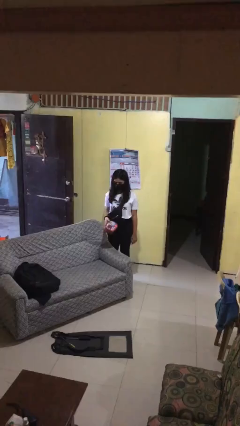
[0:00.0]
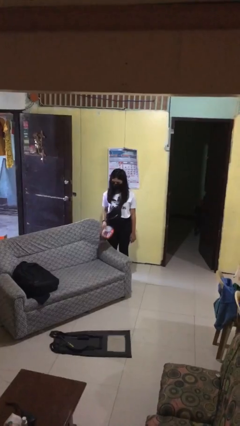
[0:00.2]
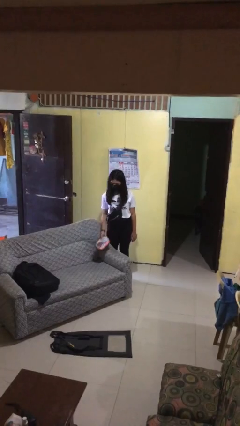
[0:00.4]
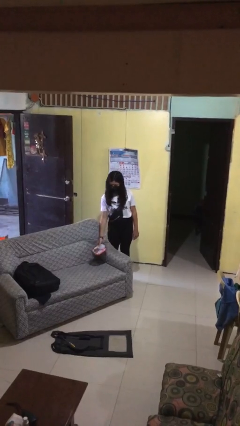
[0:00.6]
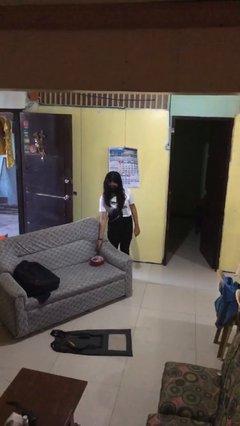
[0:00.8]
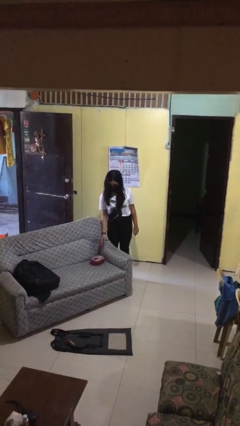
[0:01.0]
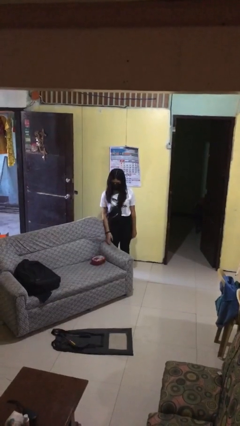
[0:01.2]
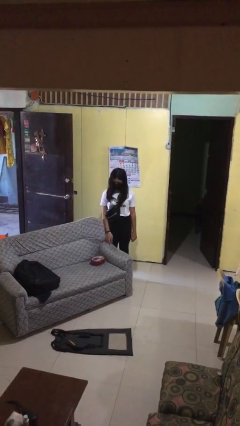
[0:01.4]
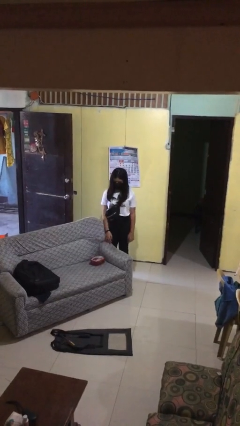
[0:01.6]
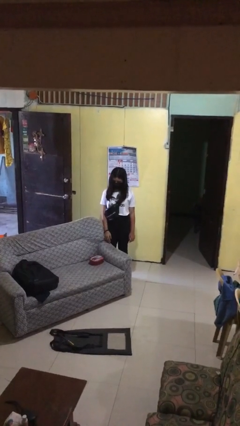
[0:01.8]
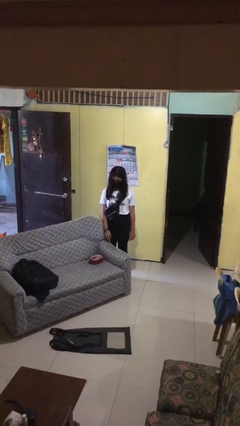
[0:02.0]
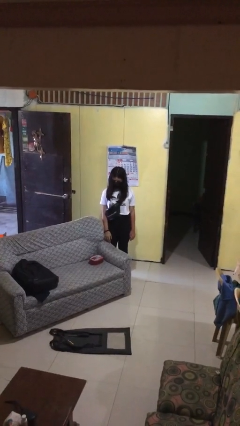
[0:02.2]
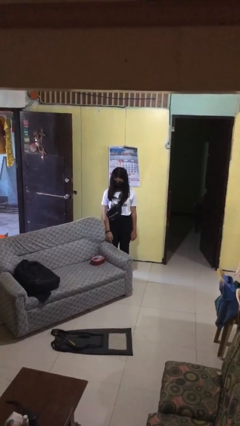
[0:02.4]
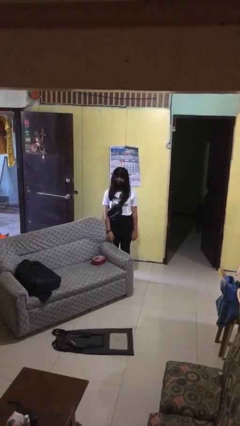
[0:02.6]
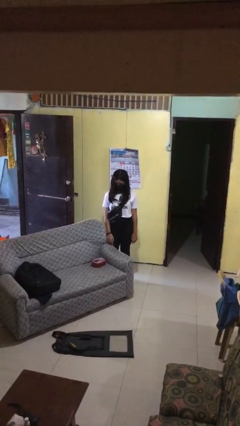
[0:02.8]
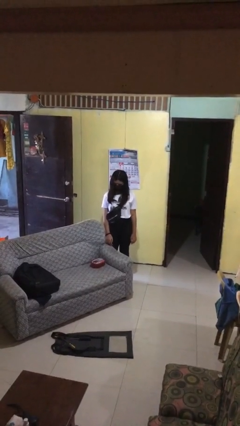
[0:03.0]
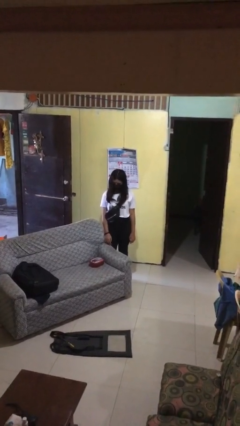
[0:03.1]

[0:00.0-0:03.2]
person puts down object on couch

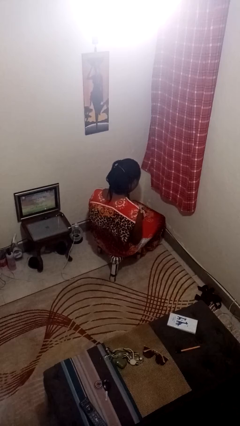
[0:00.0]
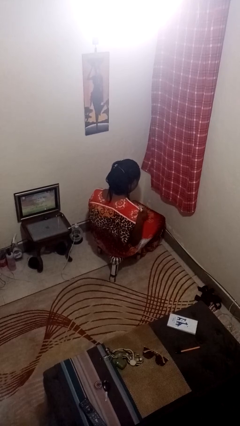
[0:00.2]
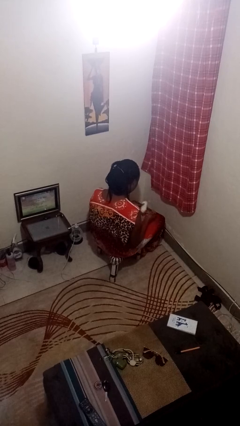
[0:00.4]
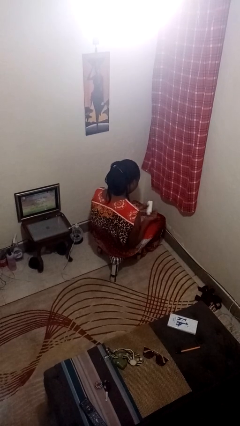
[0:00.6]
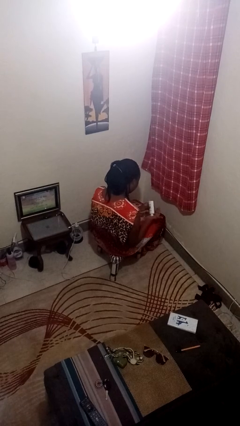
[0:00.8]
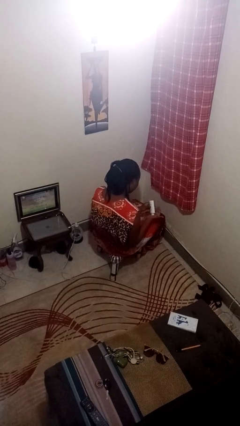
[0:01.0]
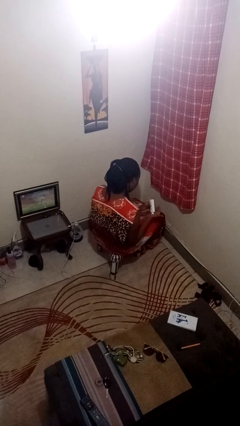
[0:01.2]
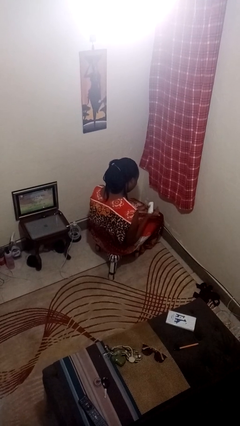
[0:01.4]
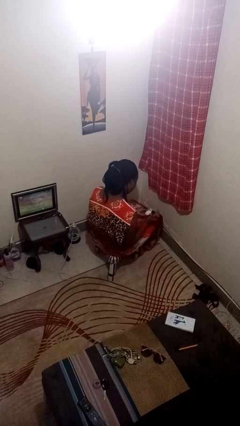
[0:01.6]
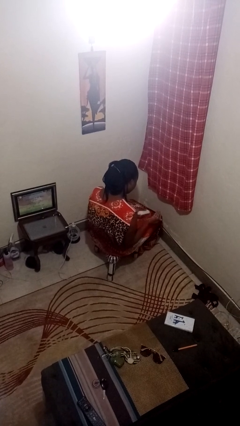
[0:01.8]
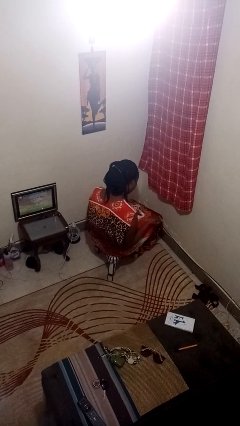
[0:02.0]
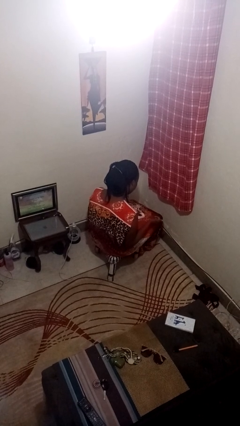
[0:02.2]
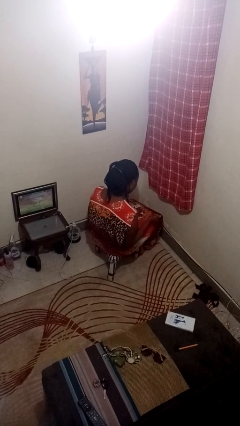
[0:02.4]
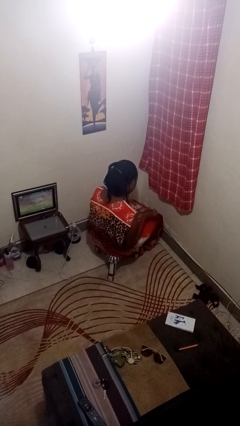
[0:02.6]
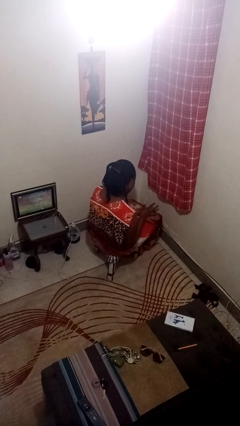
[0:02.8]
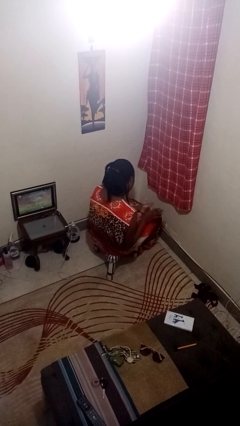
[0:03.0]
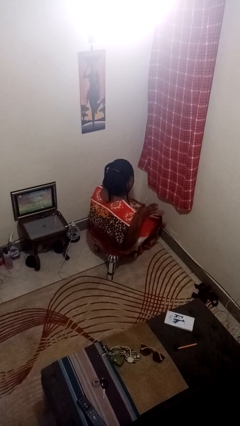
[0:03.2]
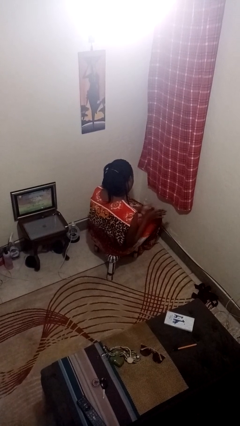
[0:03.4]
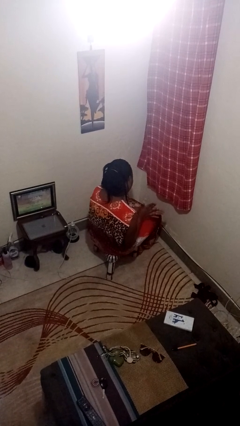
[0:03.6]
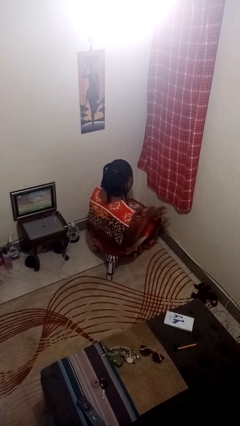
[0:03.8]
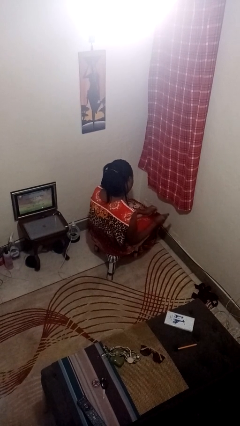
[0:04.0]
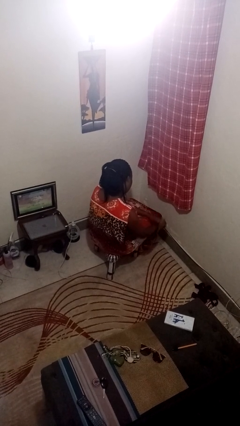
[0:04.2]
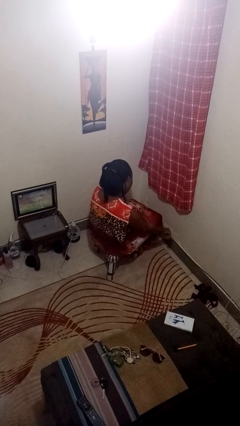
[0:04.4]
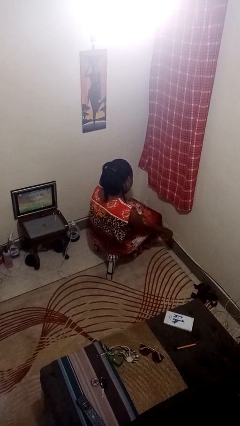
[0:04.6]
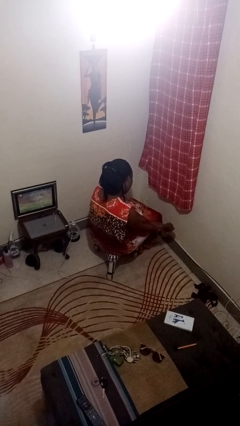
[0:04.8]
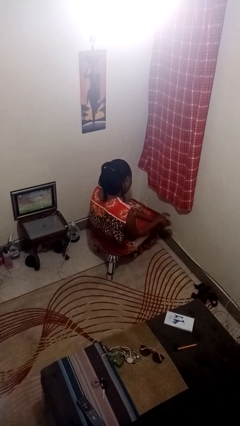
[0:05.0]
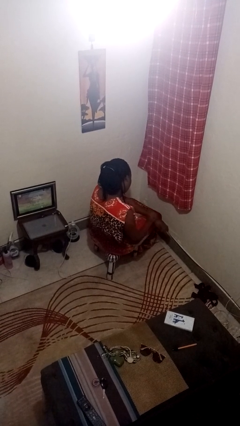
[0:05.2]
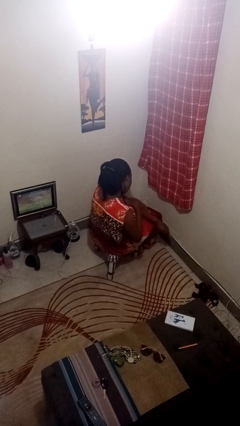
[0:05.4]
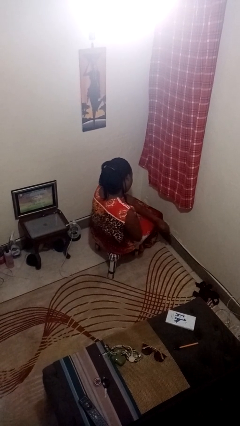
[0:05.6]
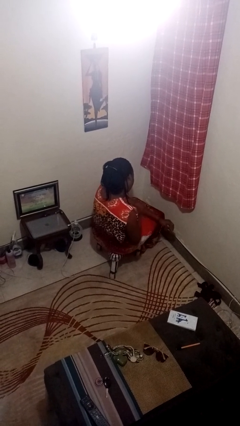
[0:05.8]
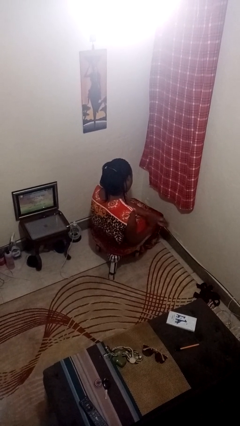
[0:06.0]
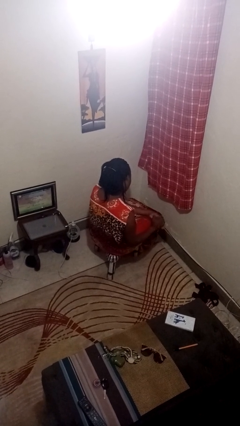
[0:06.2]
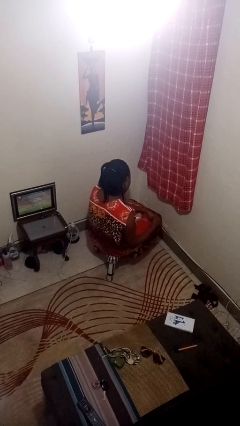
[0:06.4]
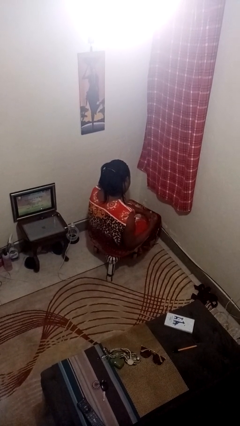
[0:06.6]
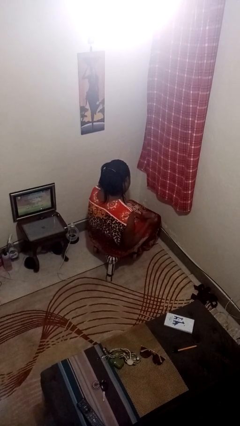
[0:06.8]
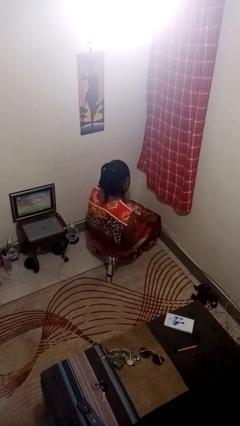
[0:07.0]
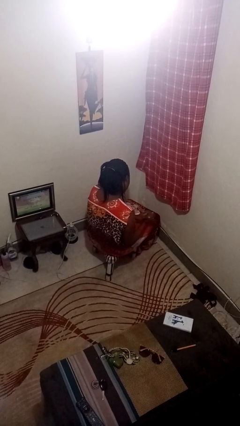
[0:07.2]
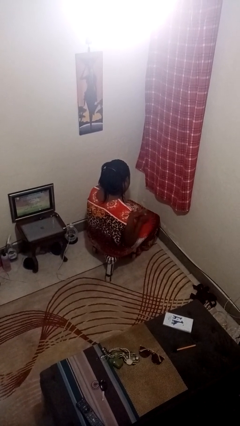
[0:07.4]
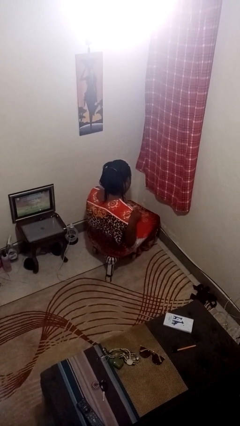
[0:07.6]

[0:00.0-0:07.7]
person applies sunscreen

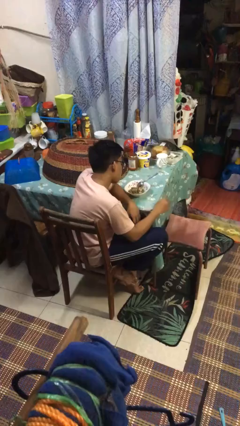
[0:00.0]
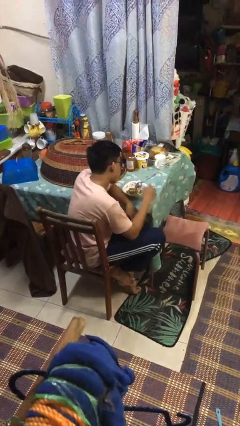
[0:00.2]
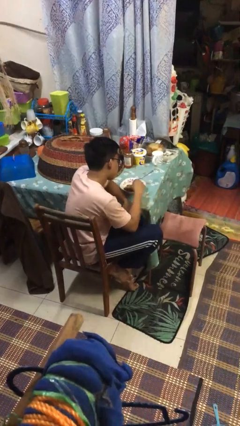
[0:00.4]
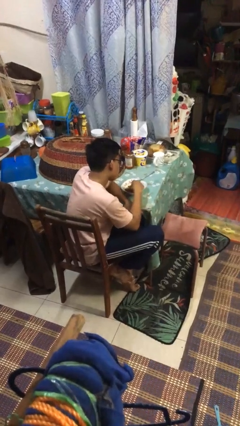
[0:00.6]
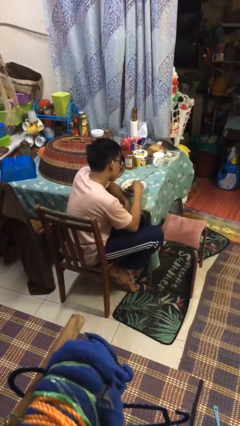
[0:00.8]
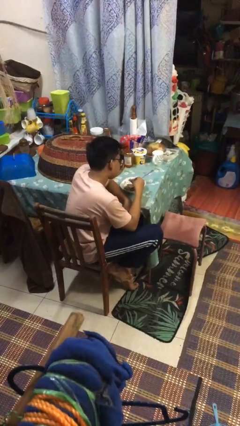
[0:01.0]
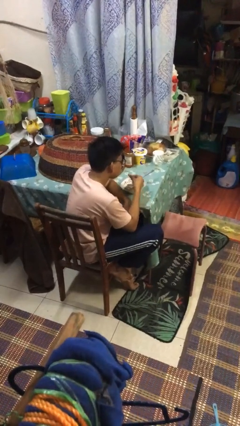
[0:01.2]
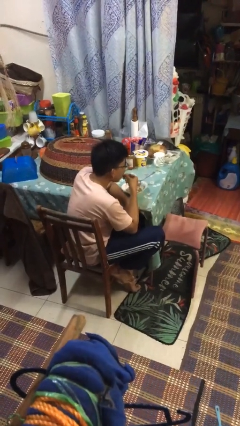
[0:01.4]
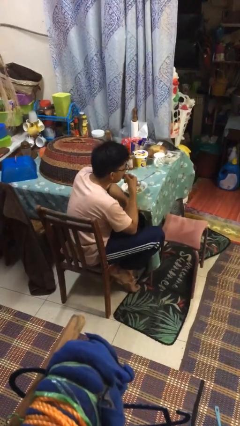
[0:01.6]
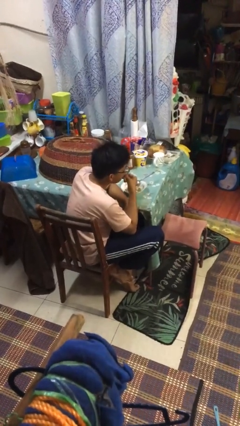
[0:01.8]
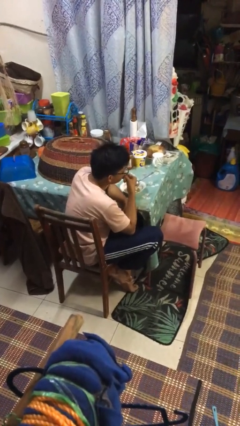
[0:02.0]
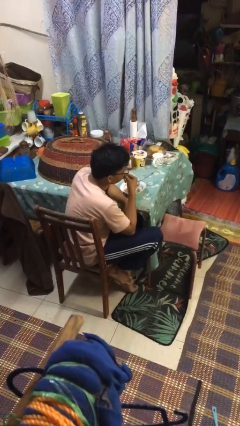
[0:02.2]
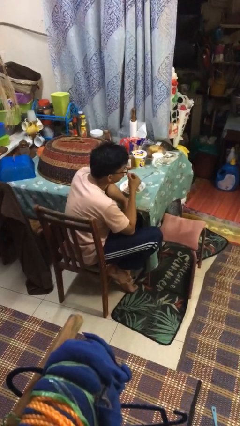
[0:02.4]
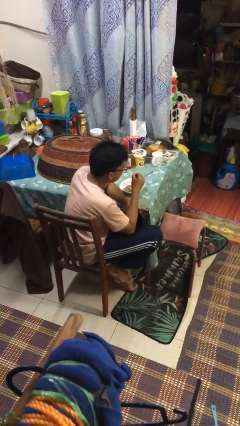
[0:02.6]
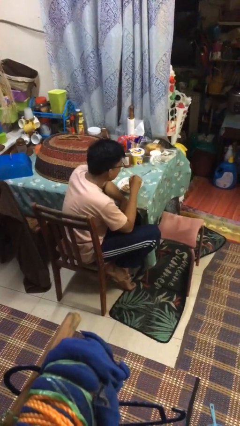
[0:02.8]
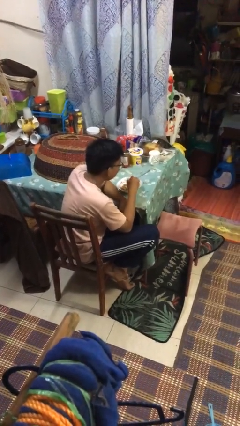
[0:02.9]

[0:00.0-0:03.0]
person eats with hands

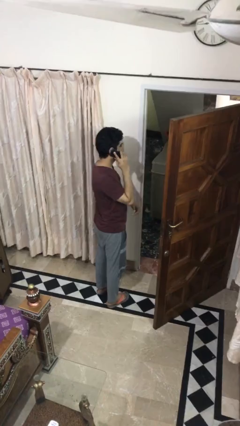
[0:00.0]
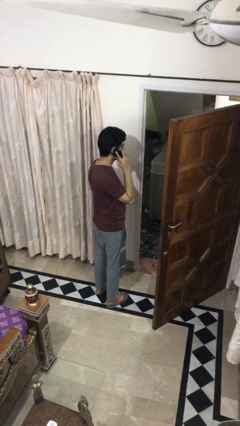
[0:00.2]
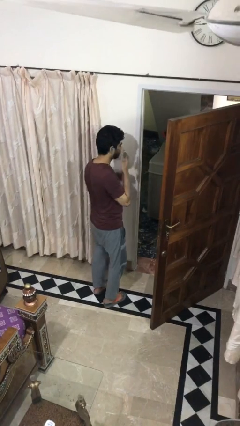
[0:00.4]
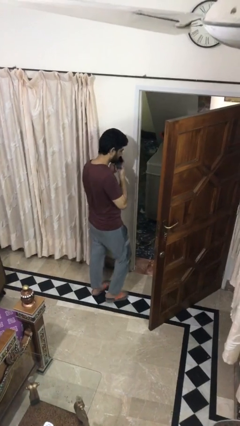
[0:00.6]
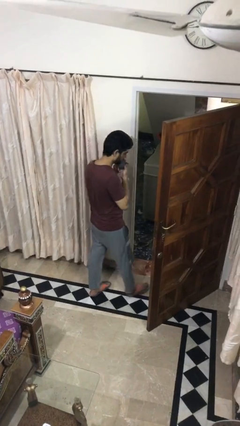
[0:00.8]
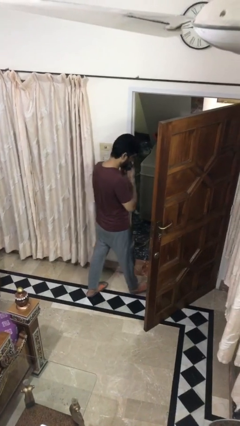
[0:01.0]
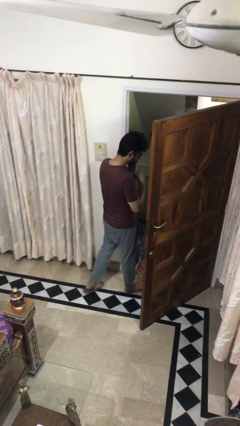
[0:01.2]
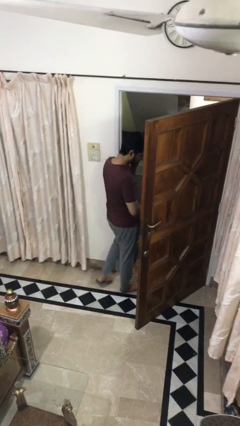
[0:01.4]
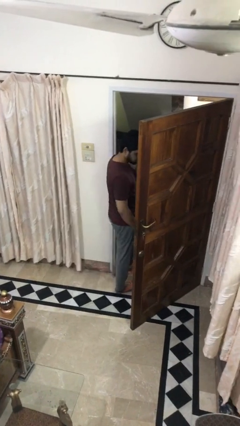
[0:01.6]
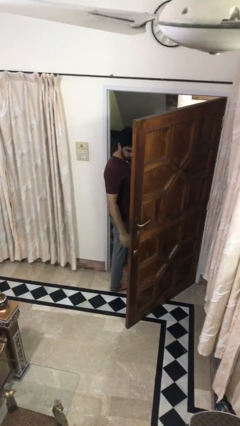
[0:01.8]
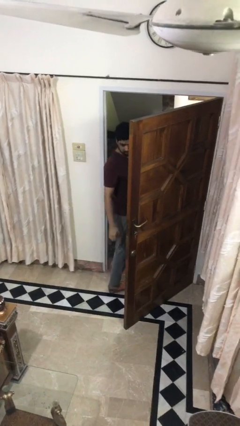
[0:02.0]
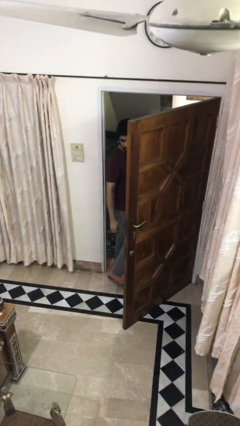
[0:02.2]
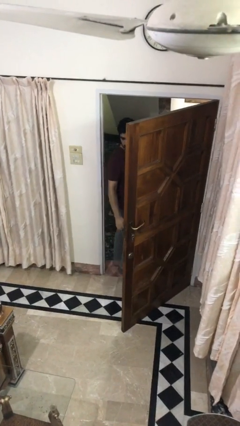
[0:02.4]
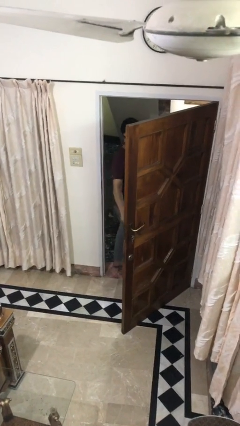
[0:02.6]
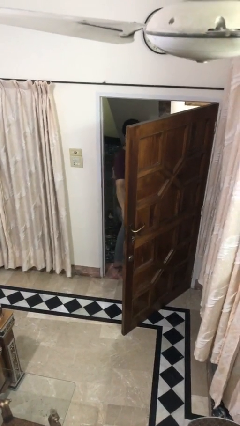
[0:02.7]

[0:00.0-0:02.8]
person exits scene through structure

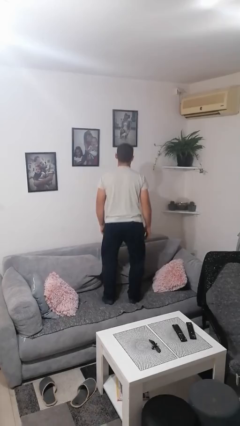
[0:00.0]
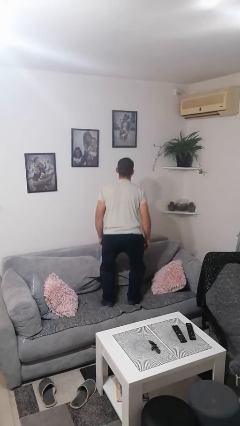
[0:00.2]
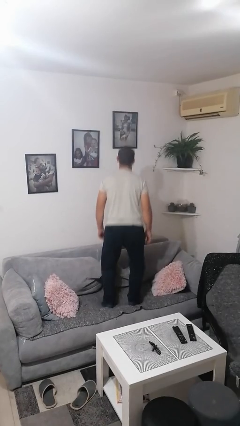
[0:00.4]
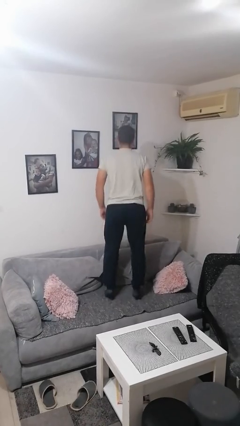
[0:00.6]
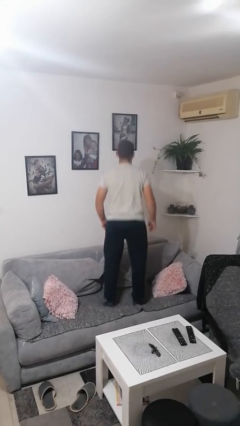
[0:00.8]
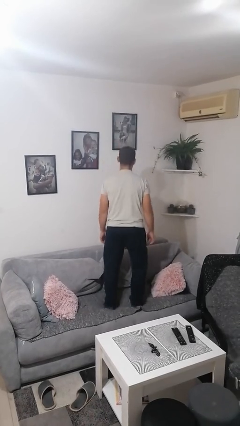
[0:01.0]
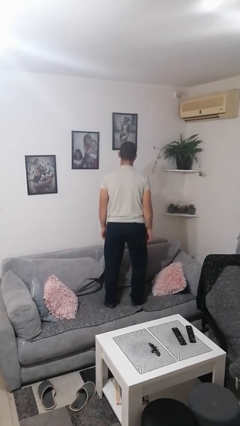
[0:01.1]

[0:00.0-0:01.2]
person jumps on couch
